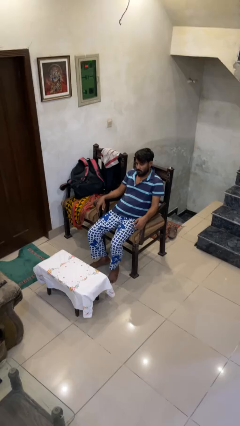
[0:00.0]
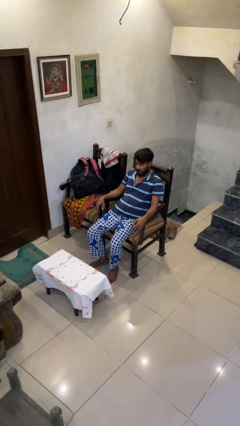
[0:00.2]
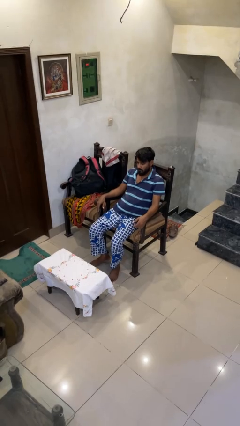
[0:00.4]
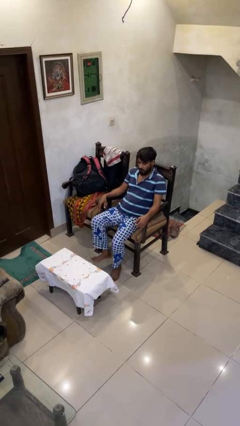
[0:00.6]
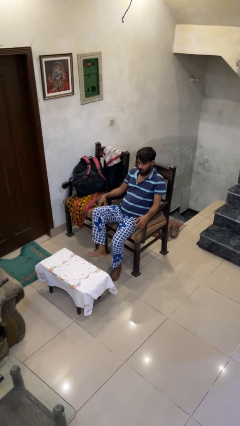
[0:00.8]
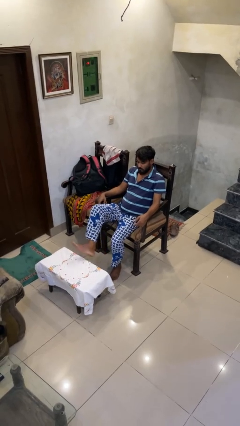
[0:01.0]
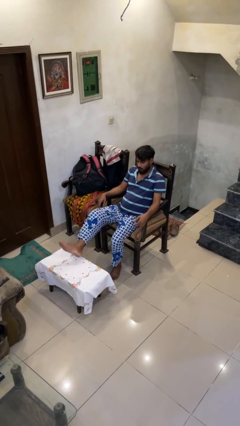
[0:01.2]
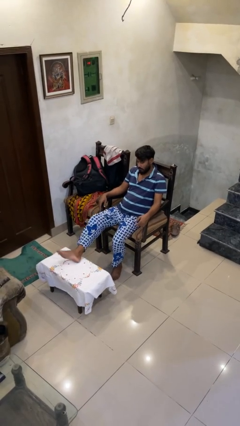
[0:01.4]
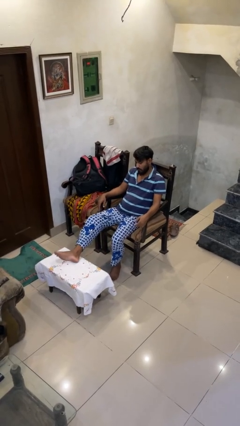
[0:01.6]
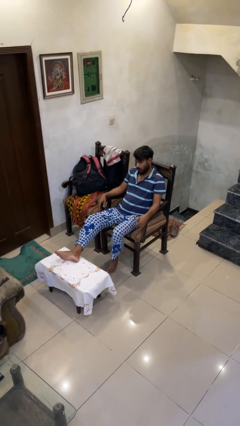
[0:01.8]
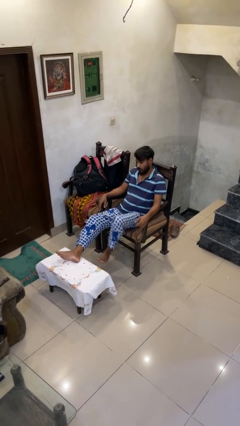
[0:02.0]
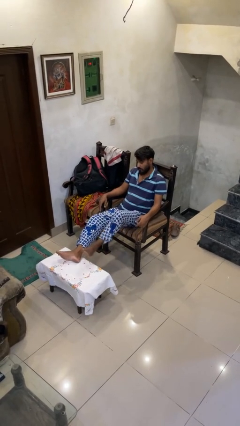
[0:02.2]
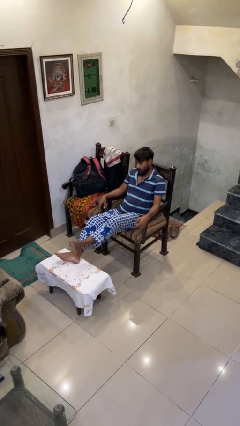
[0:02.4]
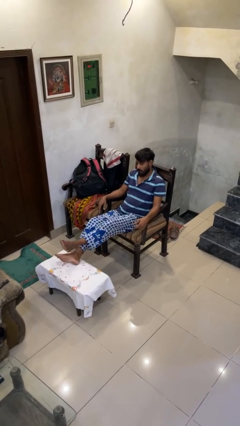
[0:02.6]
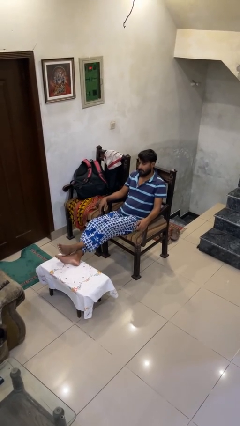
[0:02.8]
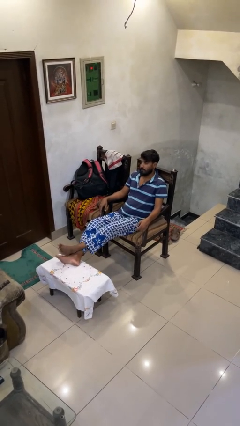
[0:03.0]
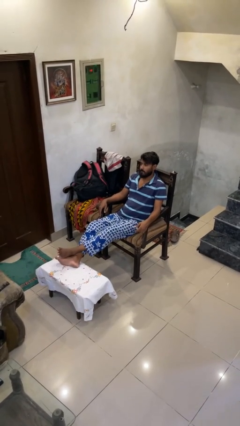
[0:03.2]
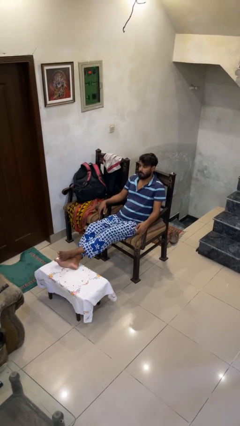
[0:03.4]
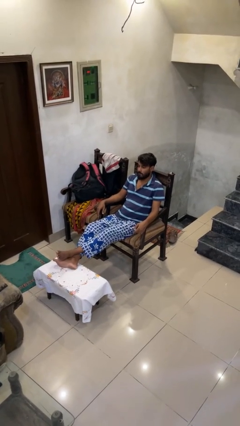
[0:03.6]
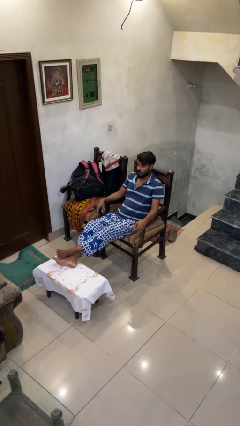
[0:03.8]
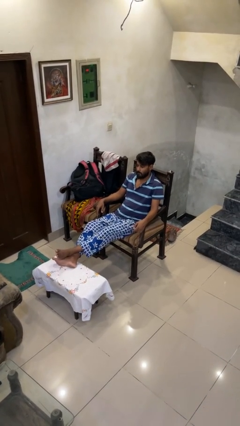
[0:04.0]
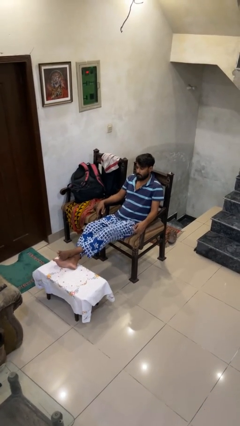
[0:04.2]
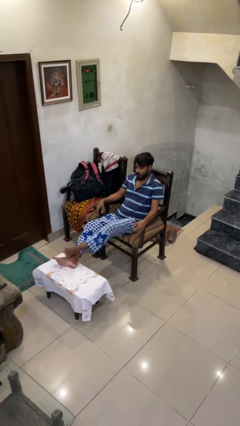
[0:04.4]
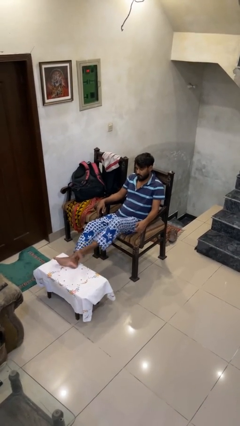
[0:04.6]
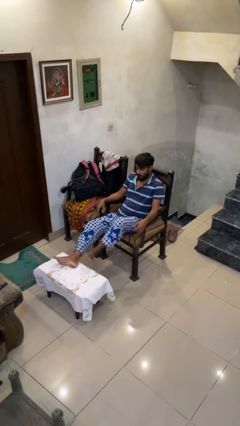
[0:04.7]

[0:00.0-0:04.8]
person puts feet up

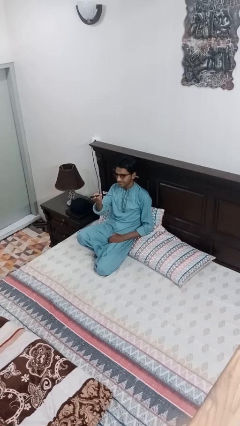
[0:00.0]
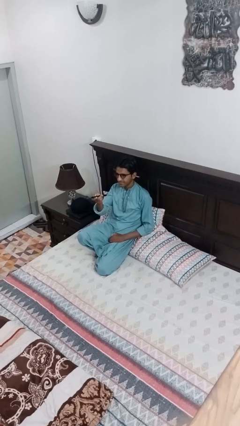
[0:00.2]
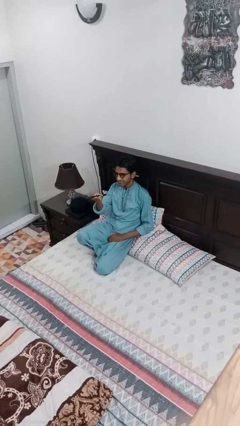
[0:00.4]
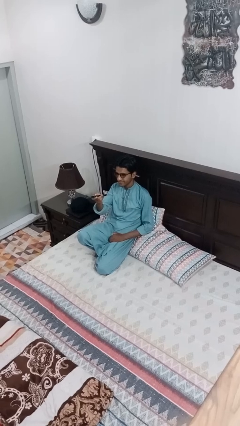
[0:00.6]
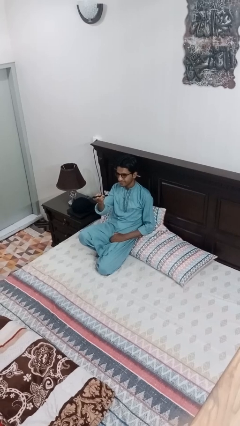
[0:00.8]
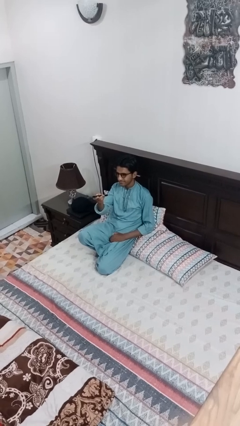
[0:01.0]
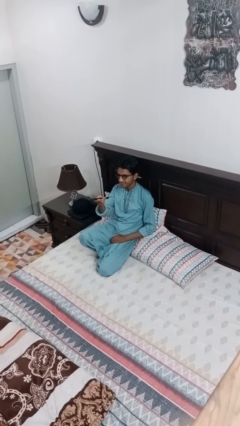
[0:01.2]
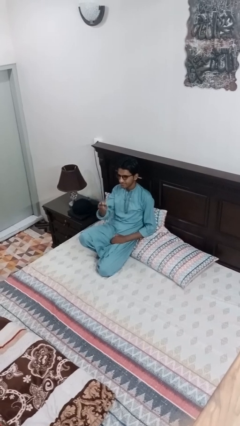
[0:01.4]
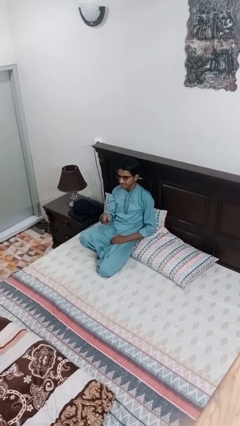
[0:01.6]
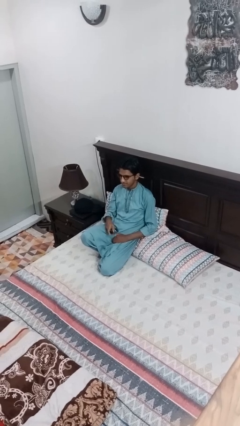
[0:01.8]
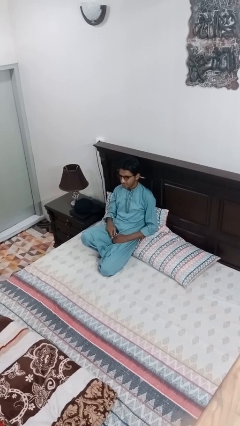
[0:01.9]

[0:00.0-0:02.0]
person uses television remote

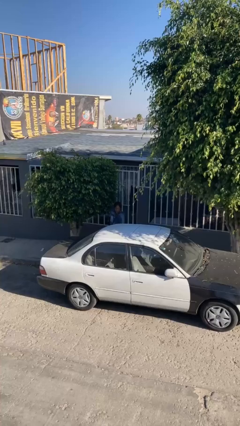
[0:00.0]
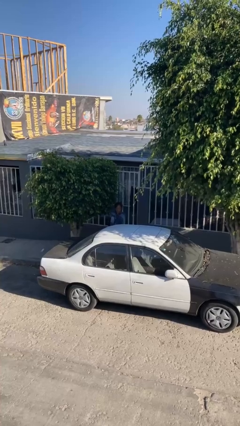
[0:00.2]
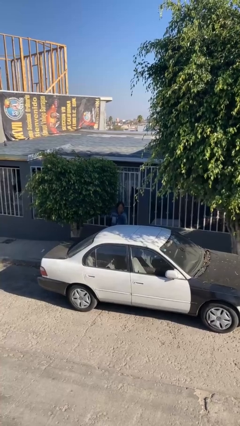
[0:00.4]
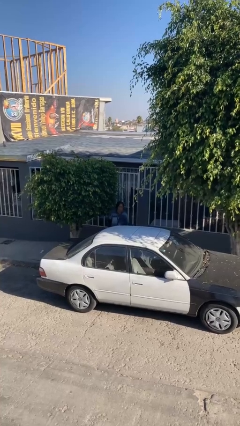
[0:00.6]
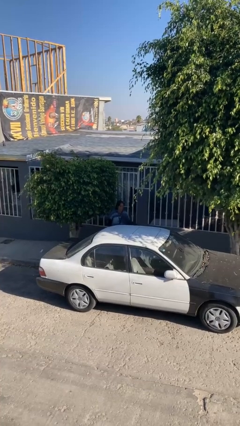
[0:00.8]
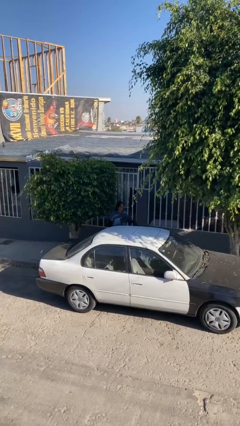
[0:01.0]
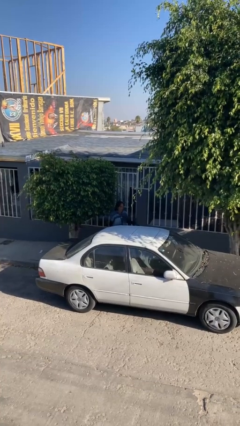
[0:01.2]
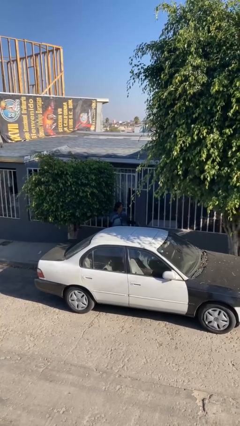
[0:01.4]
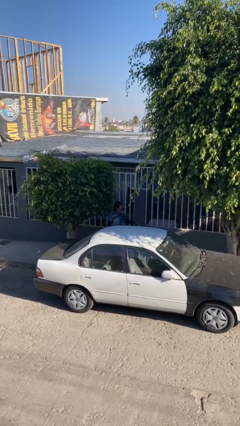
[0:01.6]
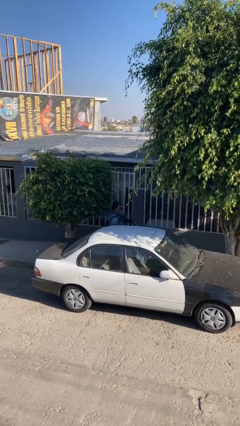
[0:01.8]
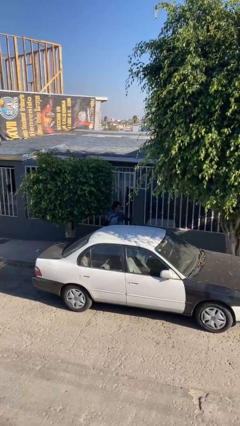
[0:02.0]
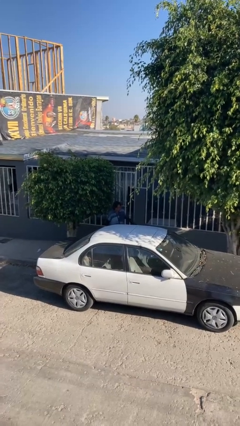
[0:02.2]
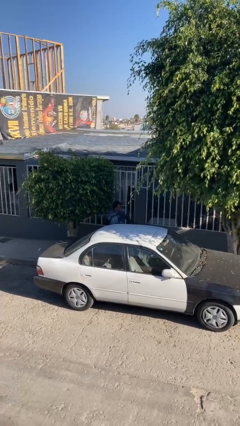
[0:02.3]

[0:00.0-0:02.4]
person opens car door

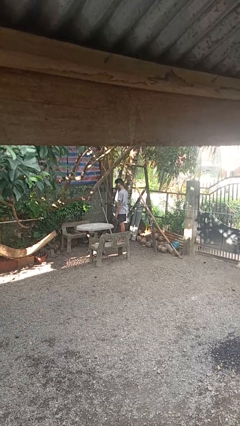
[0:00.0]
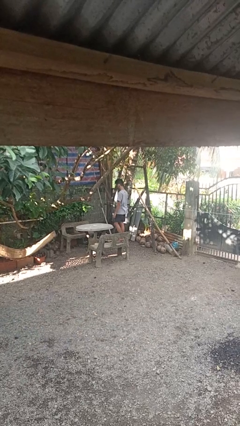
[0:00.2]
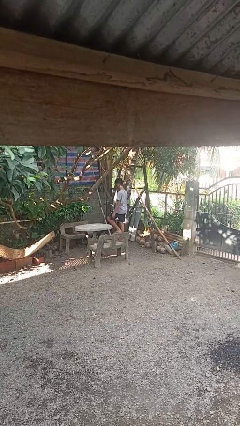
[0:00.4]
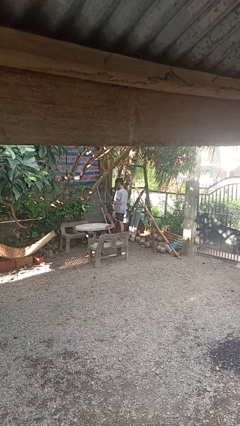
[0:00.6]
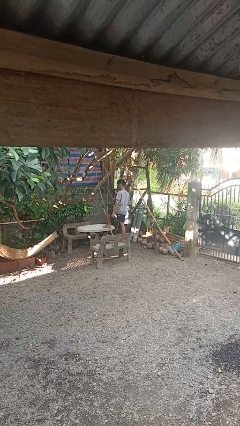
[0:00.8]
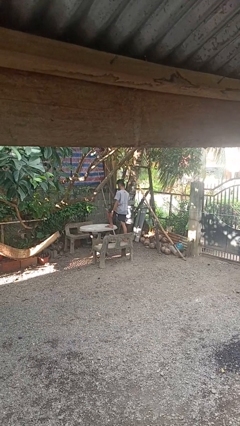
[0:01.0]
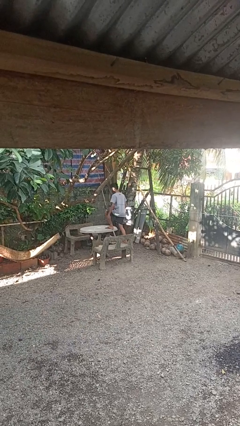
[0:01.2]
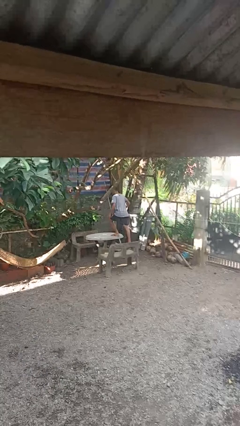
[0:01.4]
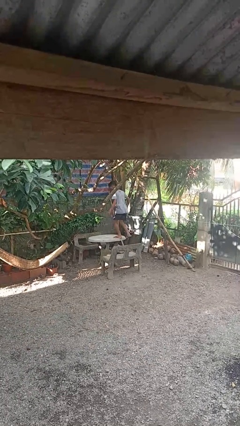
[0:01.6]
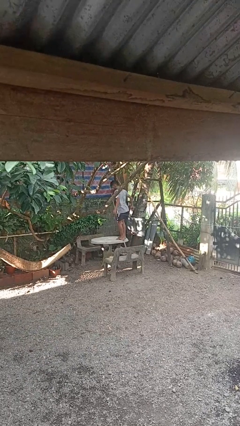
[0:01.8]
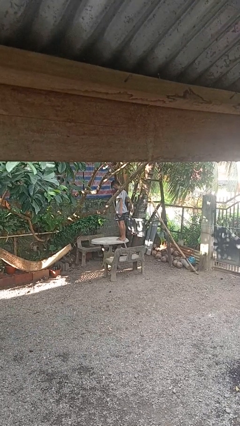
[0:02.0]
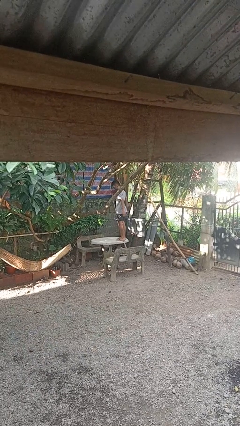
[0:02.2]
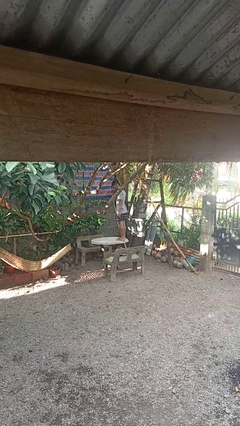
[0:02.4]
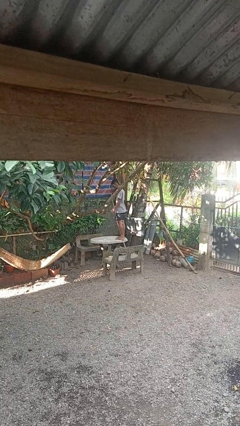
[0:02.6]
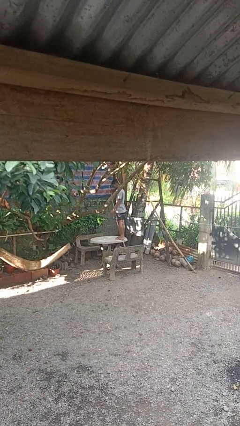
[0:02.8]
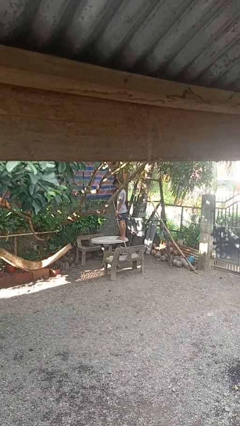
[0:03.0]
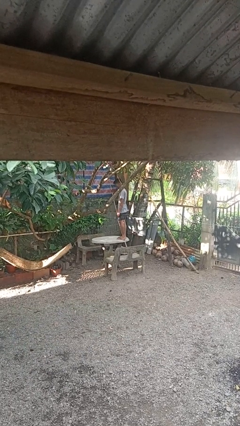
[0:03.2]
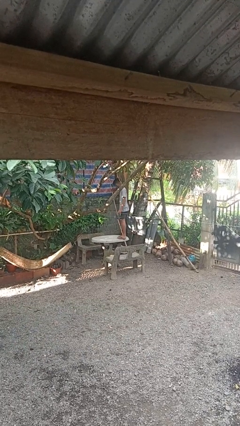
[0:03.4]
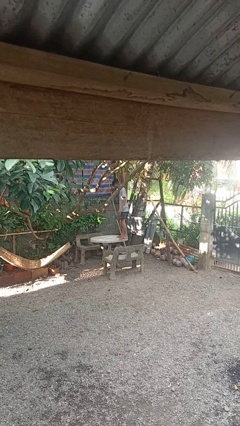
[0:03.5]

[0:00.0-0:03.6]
person climbs on table

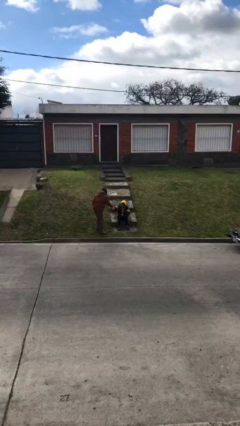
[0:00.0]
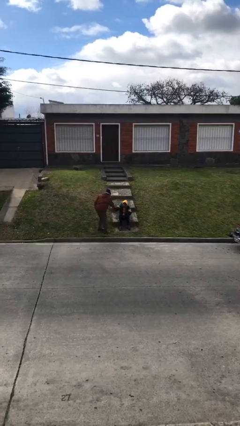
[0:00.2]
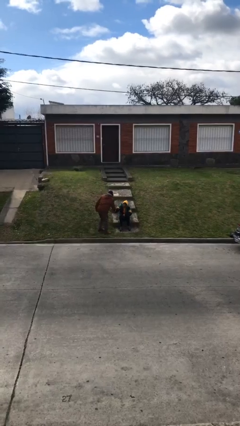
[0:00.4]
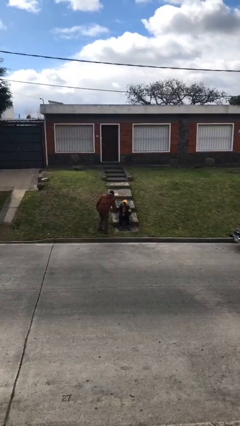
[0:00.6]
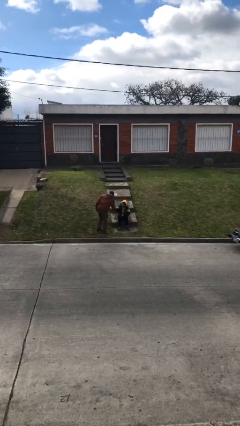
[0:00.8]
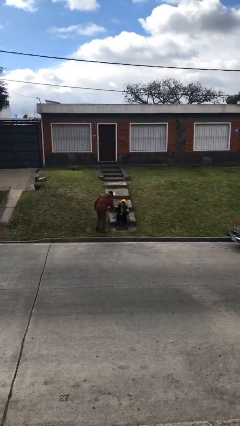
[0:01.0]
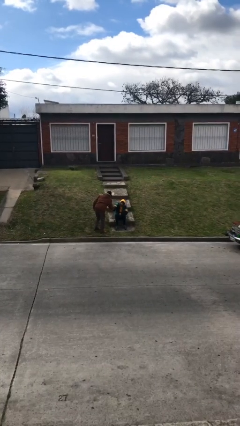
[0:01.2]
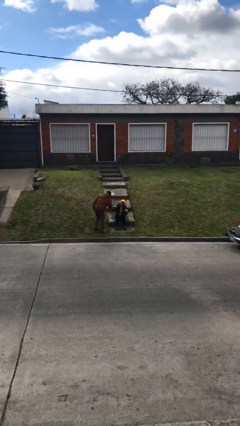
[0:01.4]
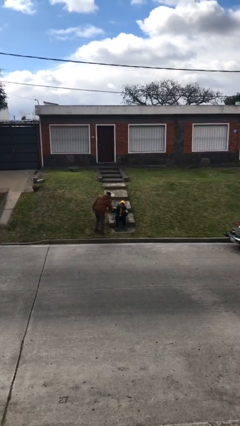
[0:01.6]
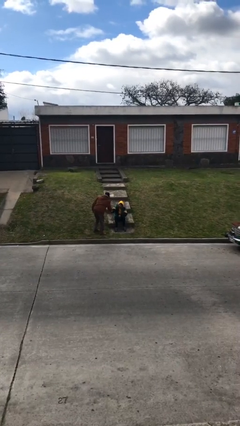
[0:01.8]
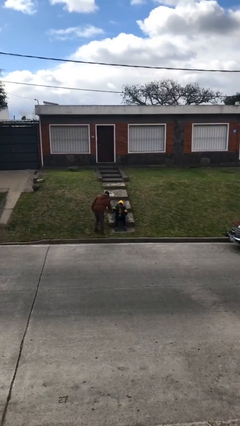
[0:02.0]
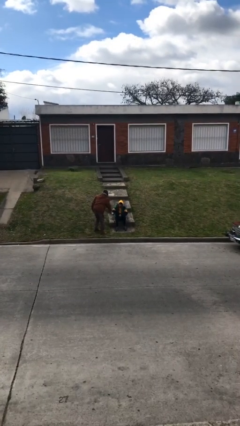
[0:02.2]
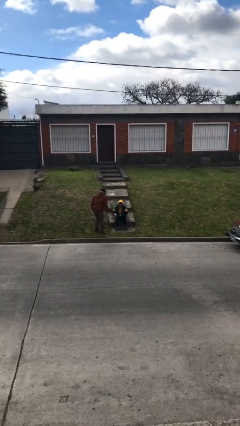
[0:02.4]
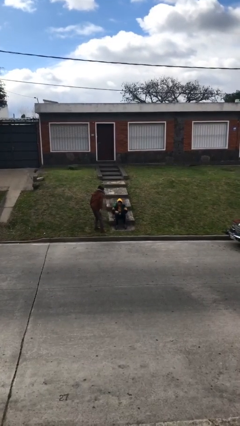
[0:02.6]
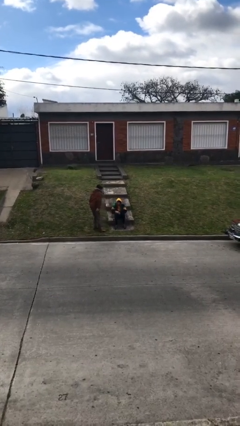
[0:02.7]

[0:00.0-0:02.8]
person shakes hand

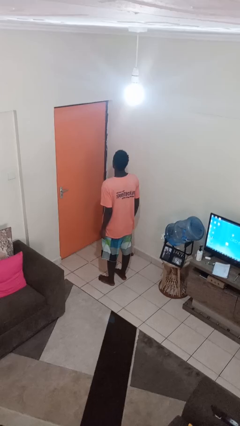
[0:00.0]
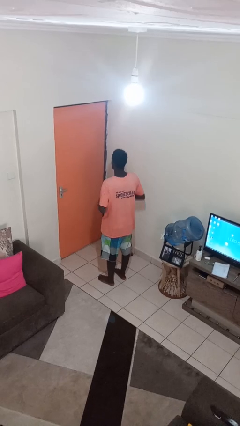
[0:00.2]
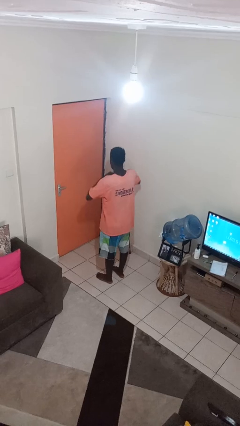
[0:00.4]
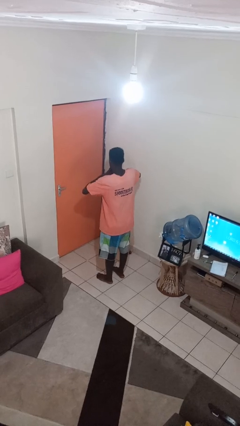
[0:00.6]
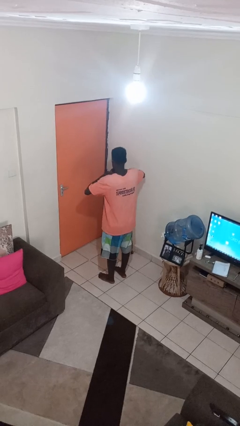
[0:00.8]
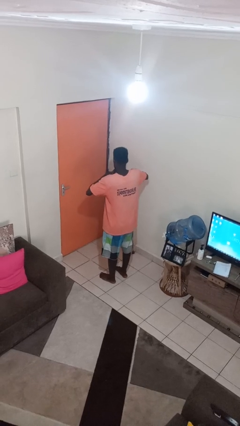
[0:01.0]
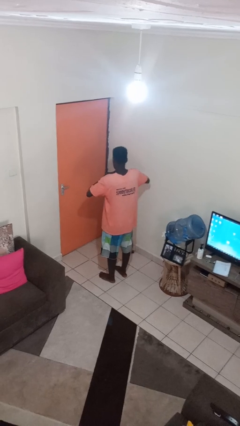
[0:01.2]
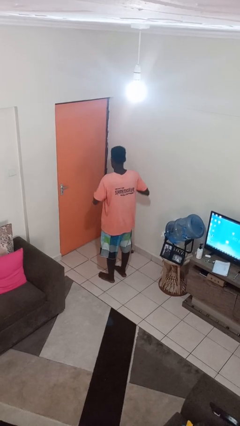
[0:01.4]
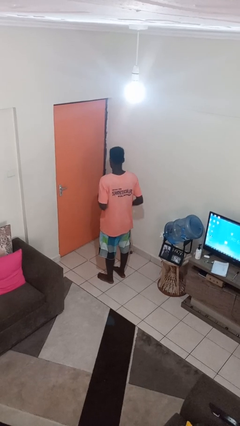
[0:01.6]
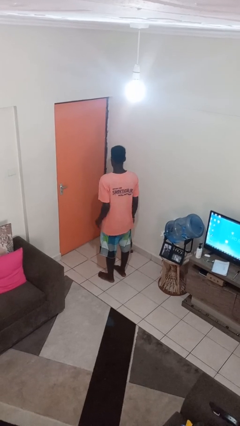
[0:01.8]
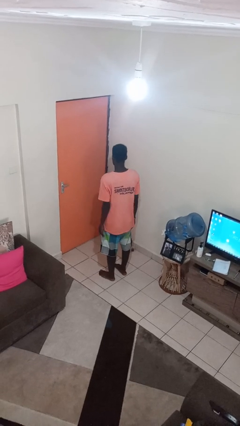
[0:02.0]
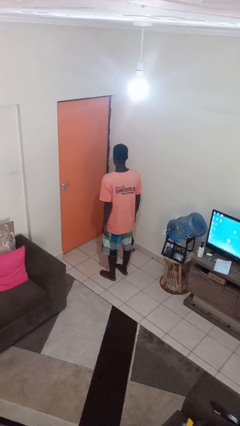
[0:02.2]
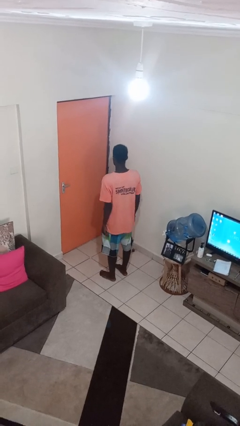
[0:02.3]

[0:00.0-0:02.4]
person takes off ring
